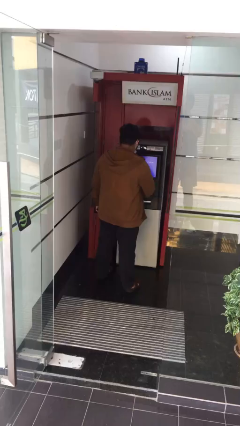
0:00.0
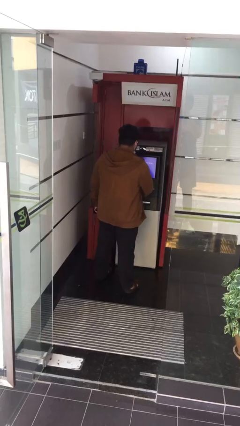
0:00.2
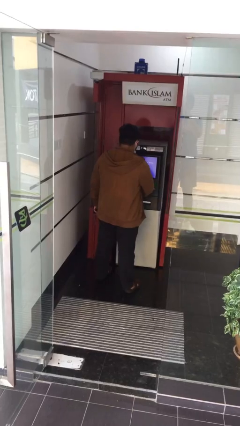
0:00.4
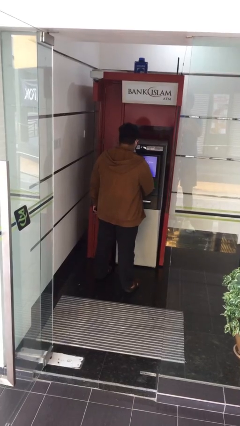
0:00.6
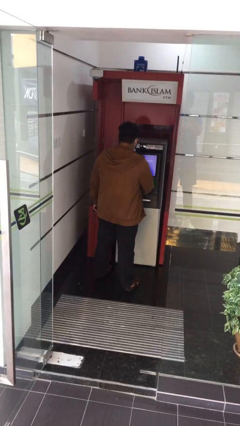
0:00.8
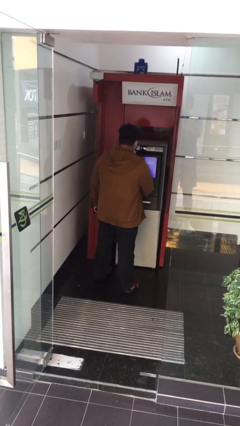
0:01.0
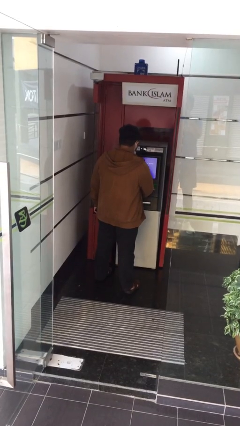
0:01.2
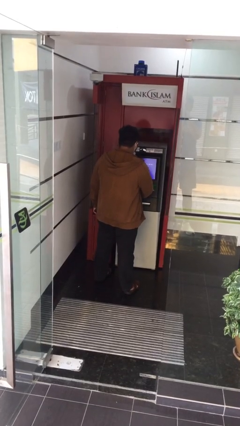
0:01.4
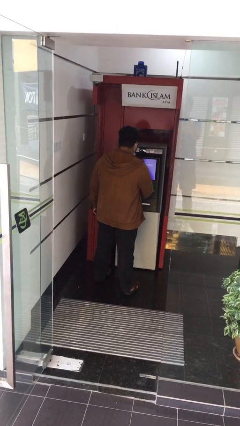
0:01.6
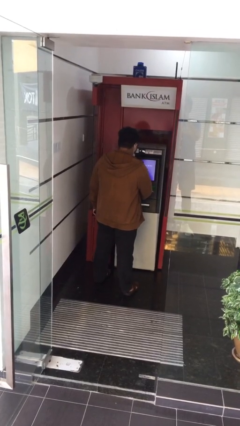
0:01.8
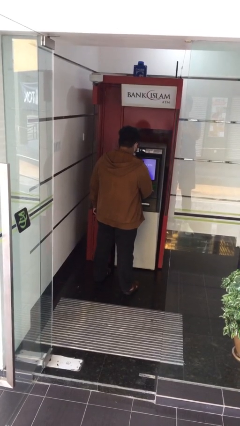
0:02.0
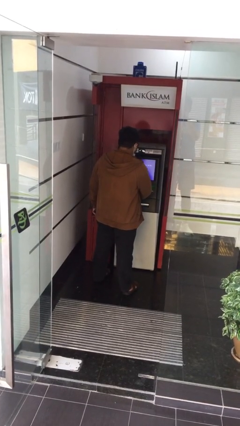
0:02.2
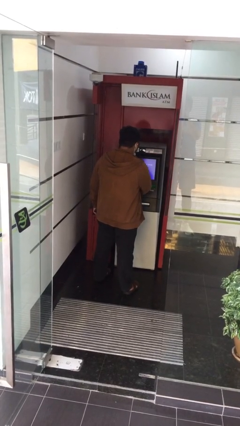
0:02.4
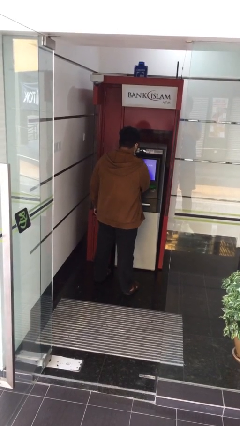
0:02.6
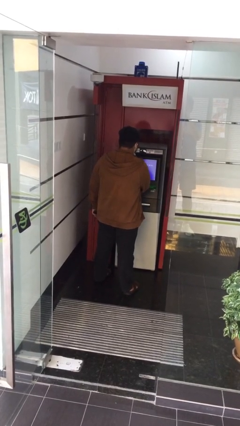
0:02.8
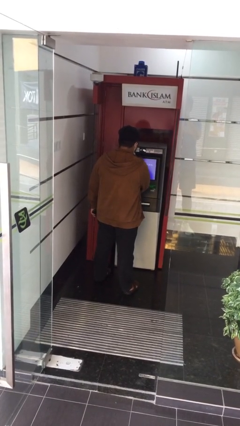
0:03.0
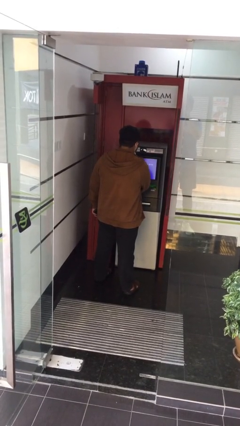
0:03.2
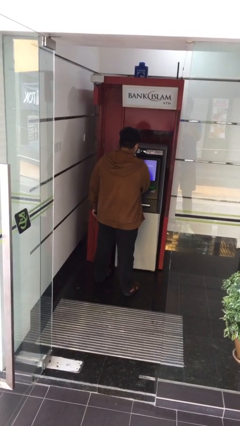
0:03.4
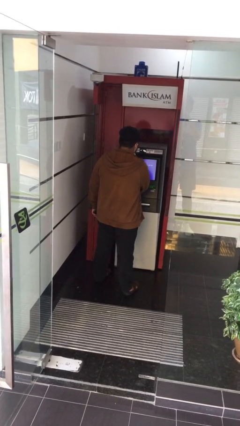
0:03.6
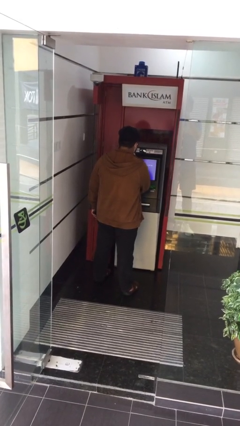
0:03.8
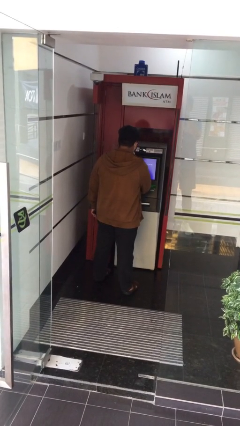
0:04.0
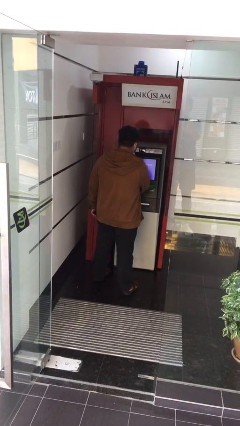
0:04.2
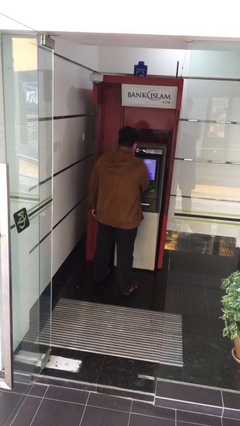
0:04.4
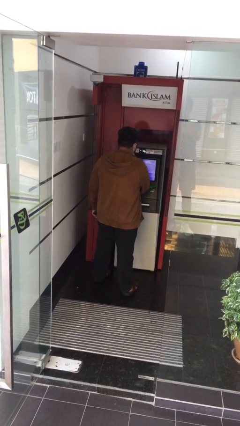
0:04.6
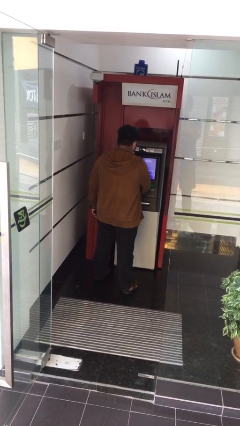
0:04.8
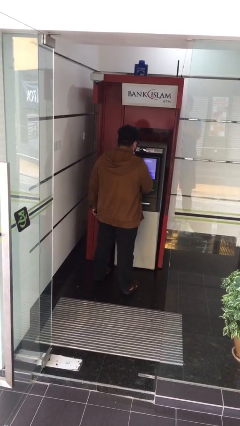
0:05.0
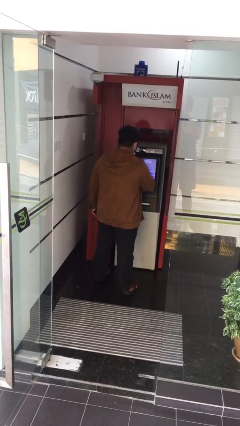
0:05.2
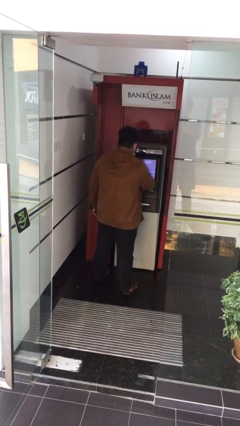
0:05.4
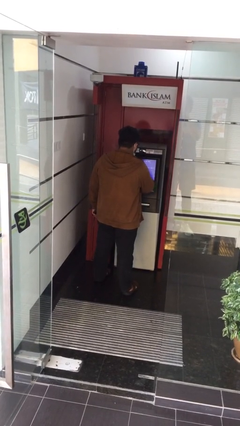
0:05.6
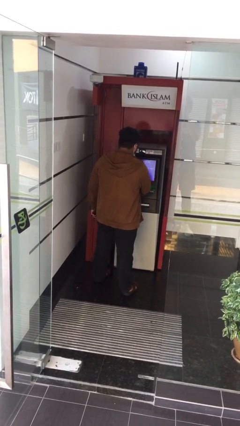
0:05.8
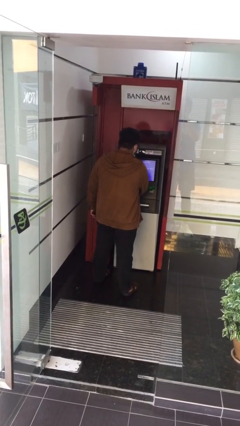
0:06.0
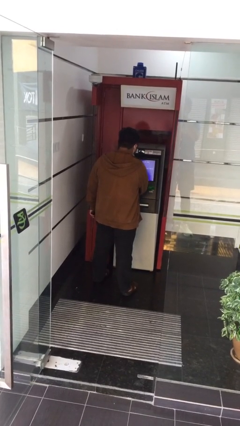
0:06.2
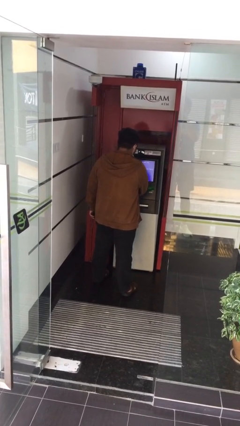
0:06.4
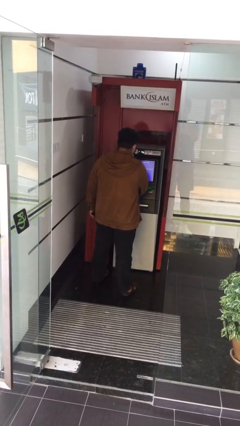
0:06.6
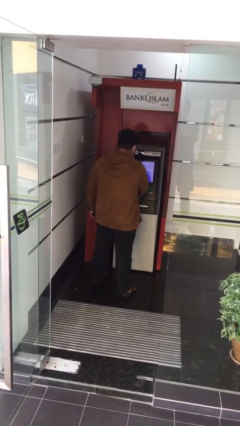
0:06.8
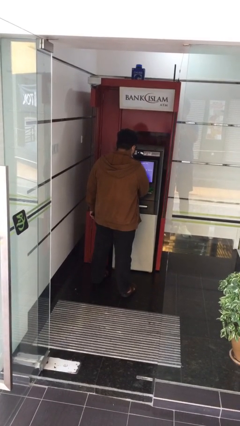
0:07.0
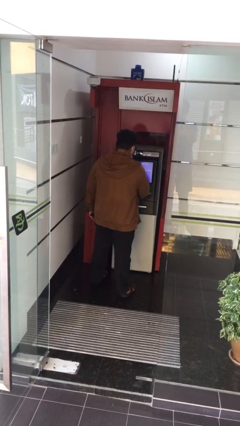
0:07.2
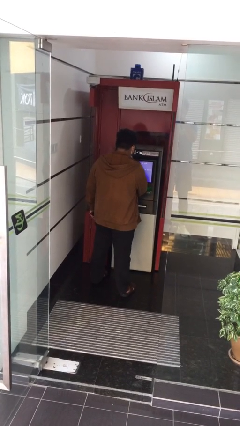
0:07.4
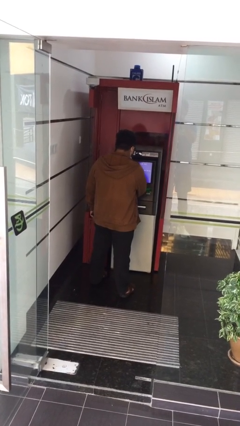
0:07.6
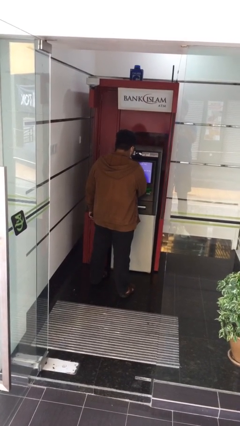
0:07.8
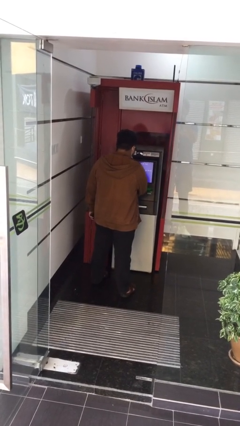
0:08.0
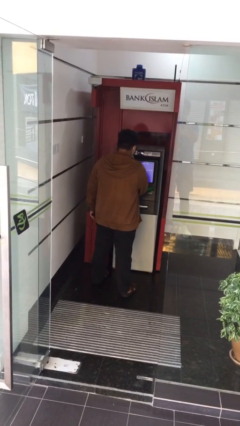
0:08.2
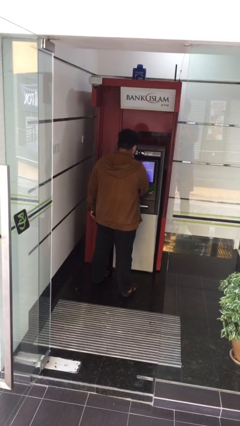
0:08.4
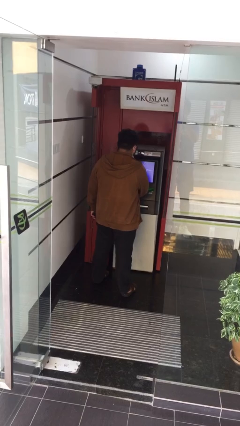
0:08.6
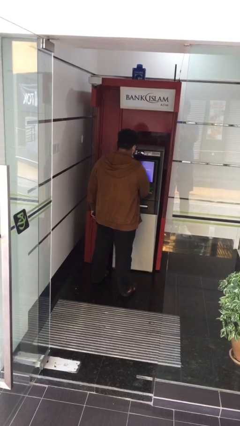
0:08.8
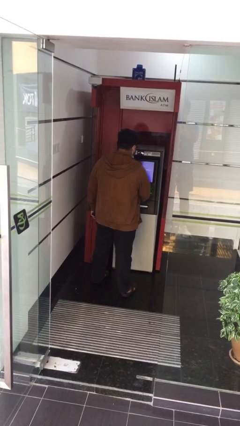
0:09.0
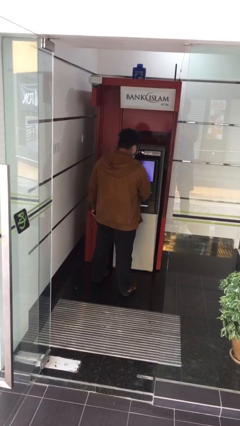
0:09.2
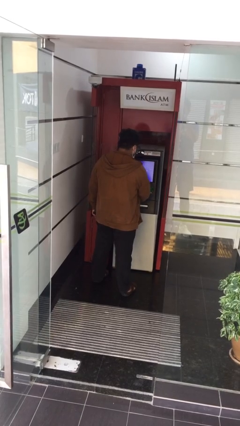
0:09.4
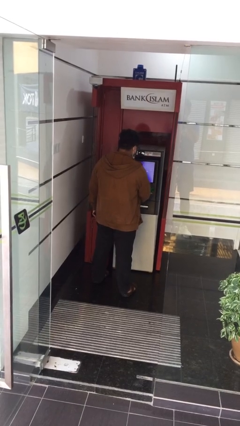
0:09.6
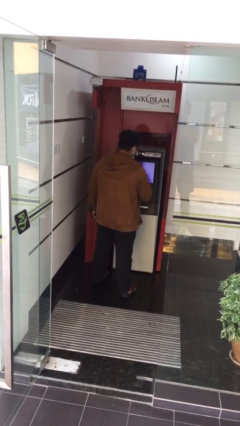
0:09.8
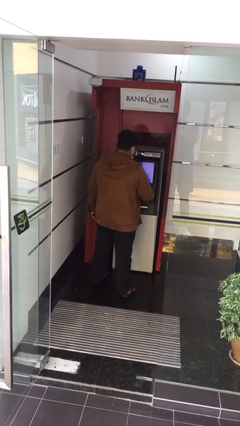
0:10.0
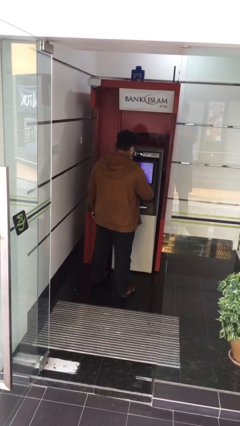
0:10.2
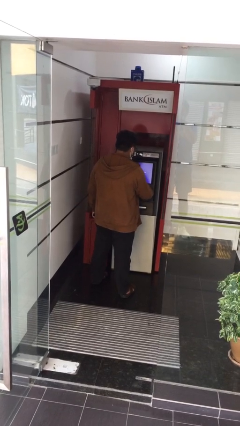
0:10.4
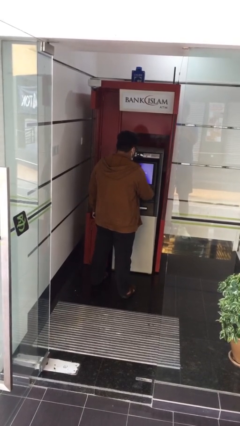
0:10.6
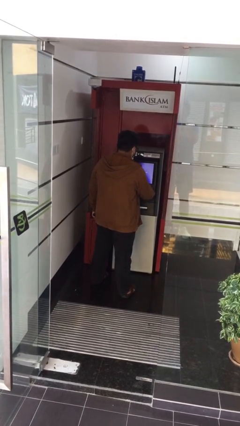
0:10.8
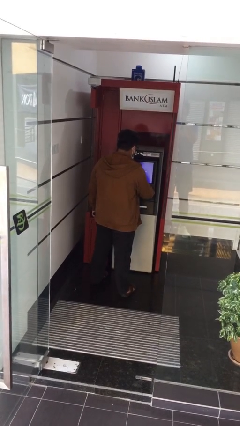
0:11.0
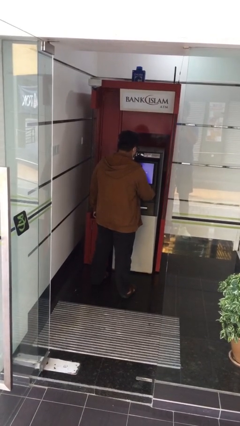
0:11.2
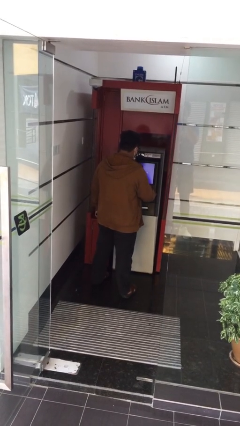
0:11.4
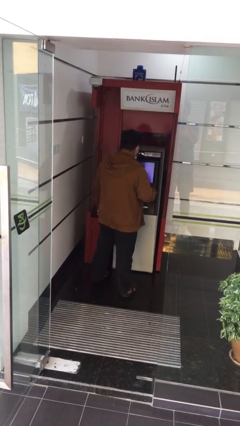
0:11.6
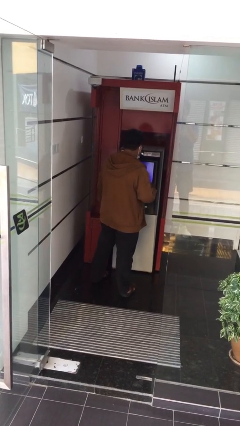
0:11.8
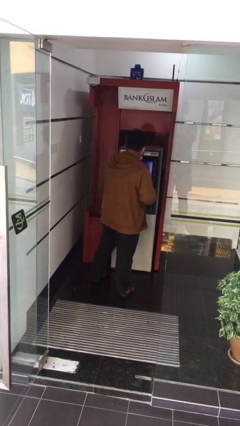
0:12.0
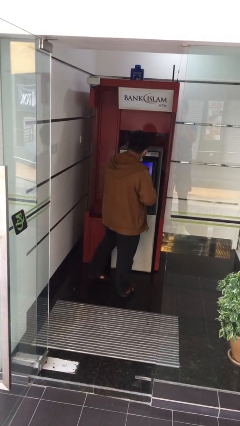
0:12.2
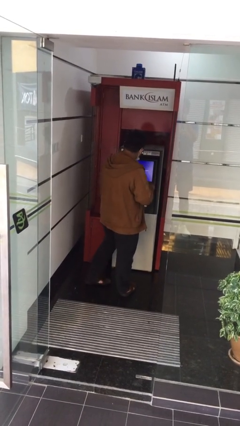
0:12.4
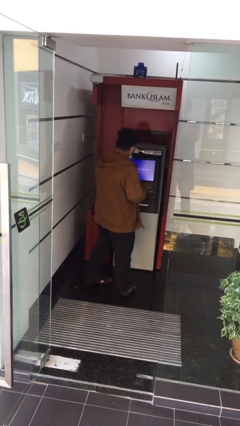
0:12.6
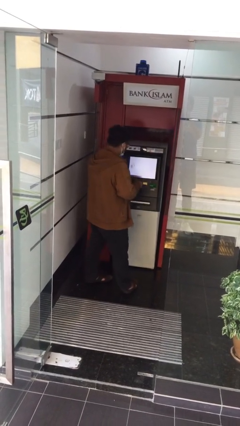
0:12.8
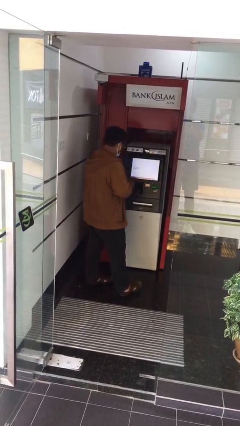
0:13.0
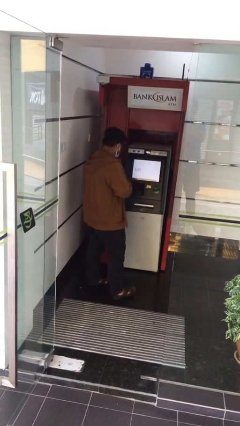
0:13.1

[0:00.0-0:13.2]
person purchases from machine

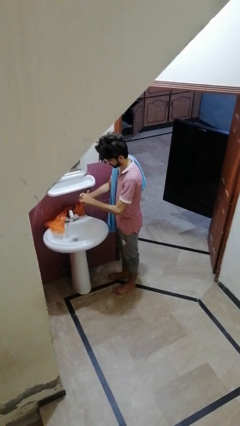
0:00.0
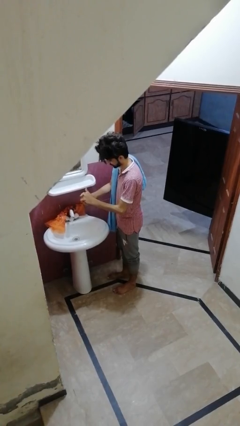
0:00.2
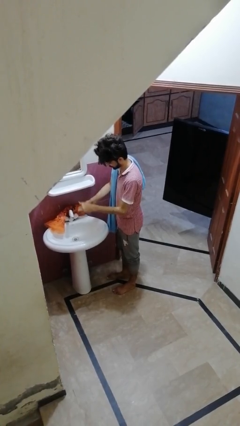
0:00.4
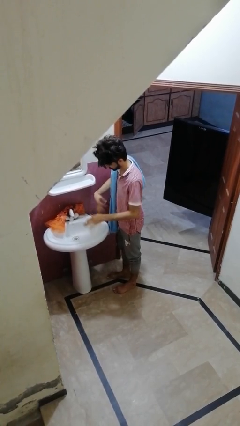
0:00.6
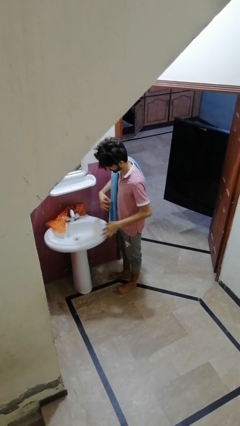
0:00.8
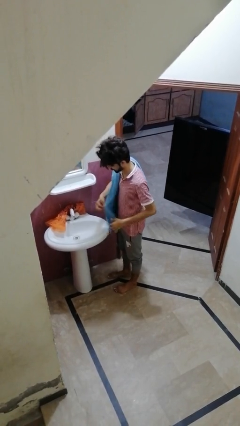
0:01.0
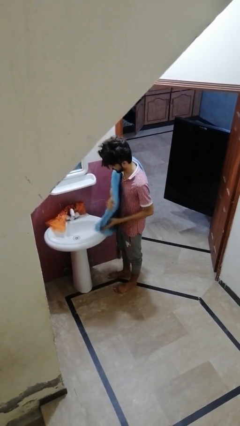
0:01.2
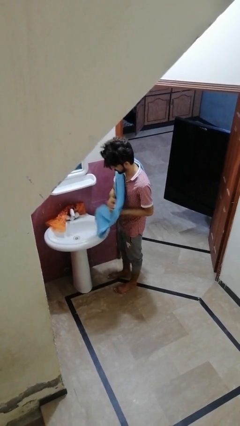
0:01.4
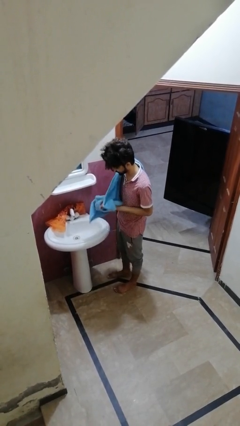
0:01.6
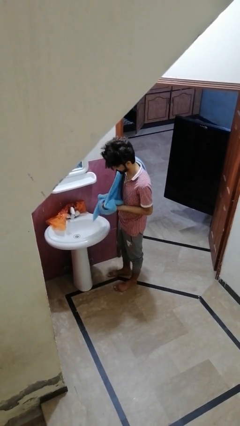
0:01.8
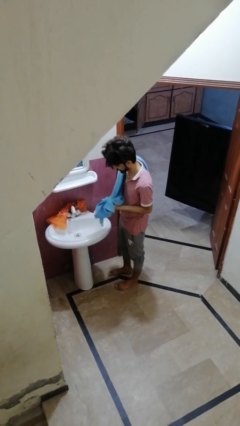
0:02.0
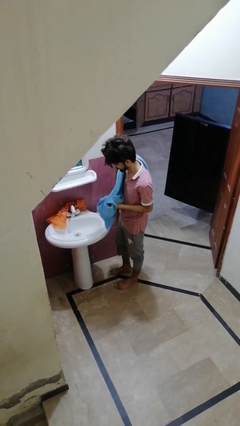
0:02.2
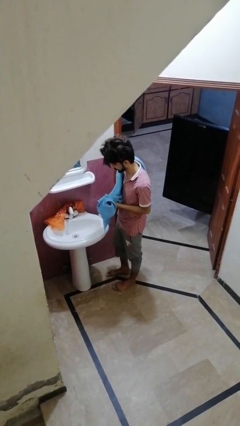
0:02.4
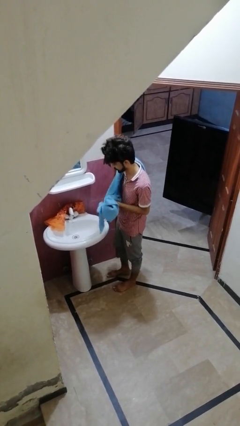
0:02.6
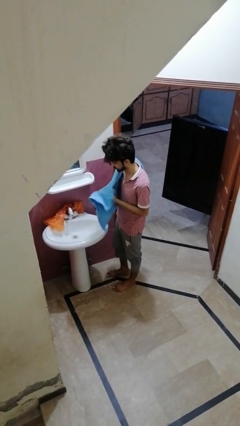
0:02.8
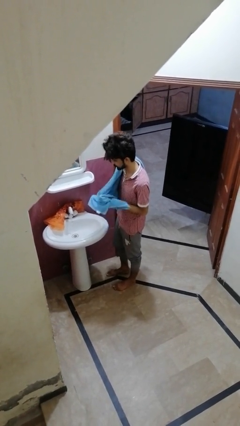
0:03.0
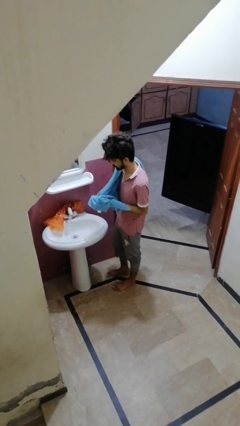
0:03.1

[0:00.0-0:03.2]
person dries hands with towel

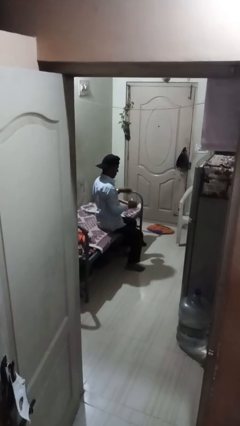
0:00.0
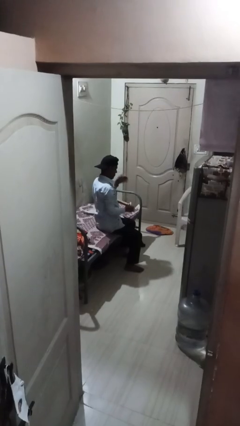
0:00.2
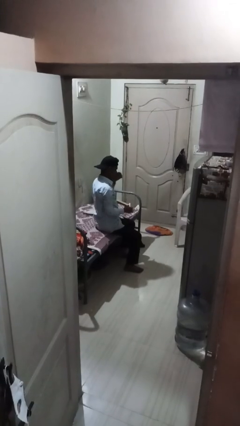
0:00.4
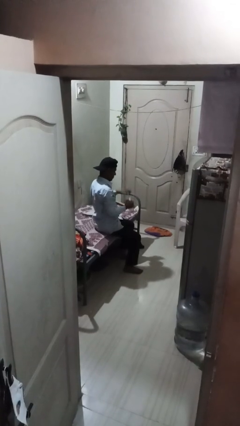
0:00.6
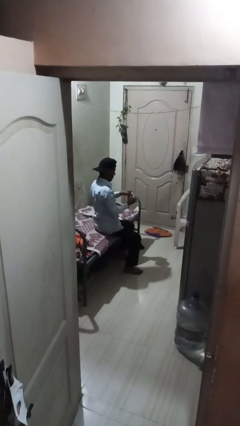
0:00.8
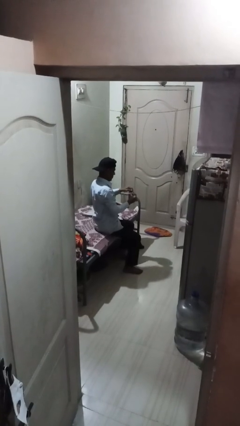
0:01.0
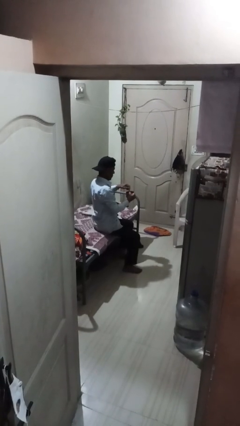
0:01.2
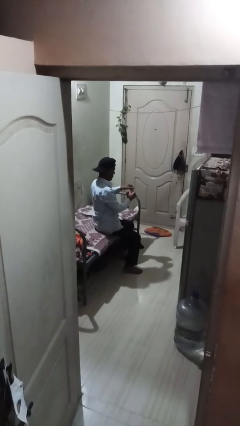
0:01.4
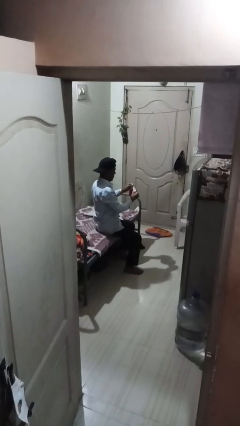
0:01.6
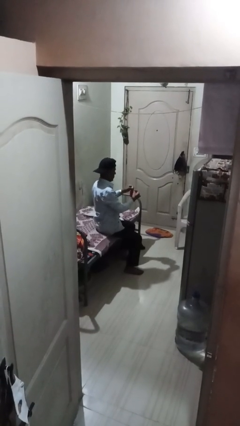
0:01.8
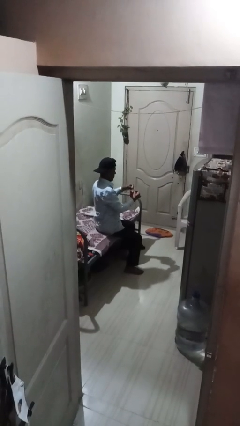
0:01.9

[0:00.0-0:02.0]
person stirs mug
